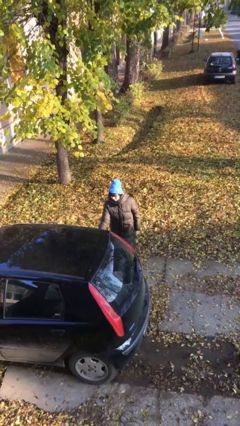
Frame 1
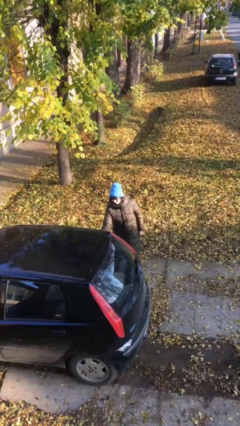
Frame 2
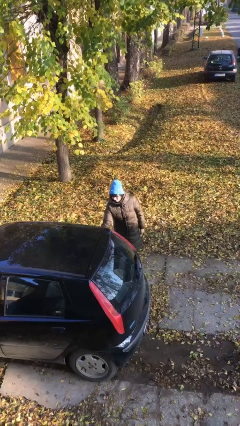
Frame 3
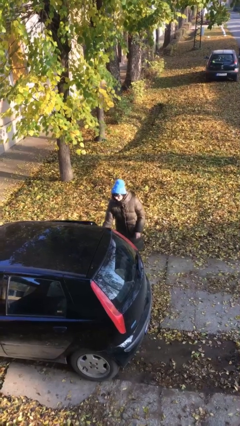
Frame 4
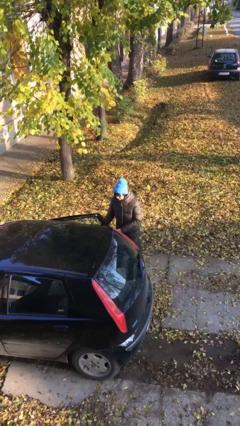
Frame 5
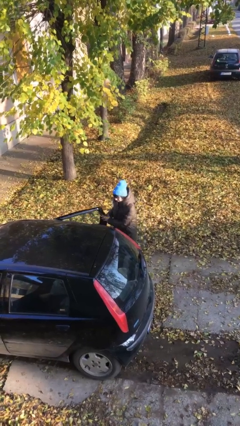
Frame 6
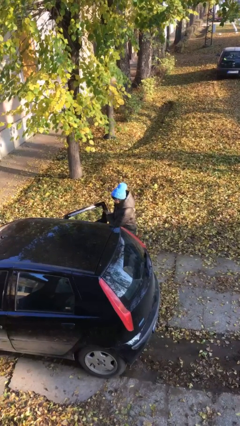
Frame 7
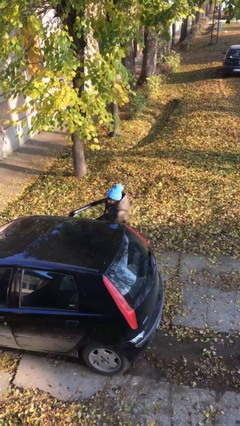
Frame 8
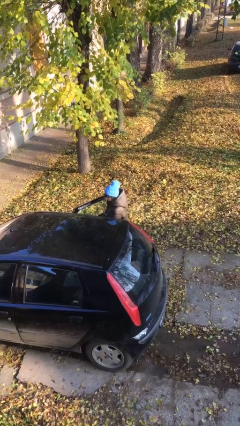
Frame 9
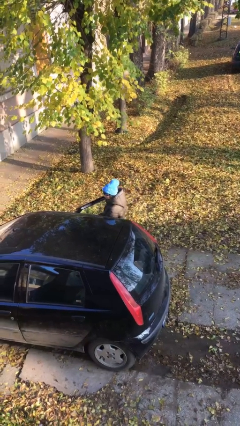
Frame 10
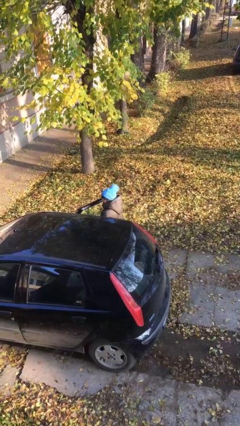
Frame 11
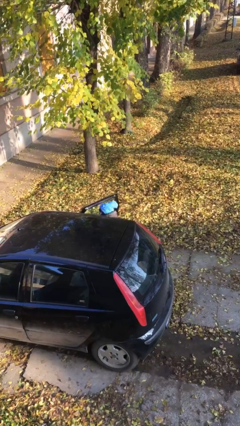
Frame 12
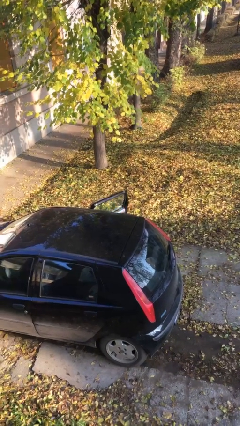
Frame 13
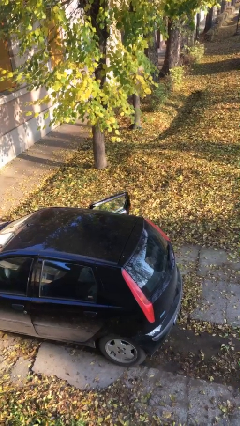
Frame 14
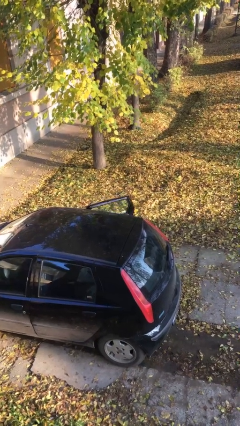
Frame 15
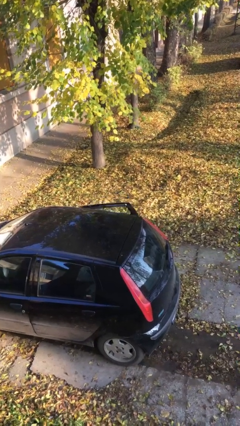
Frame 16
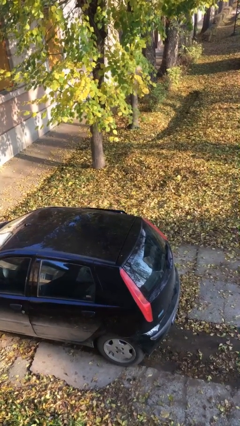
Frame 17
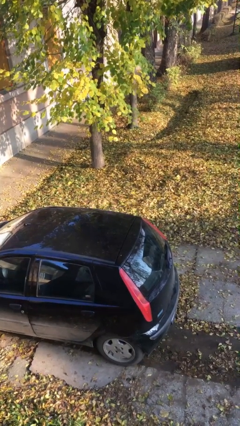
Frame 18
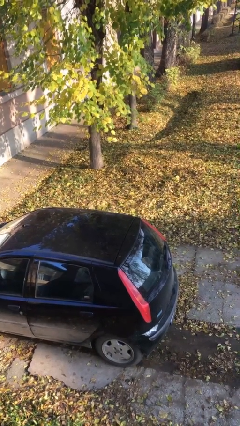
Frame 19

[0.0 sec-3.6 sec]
person enters car

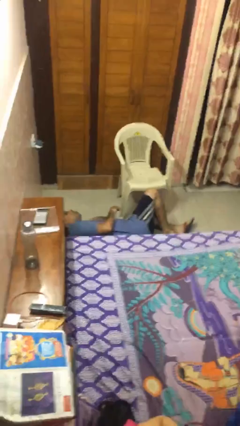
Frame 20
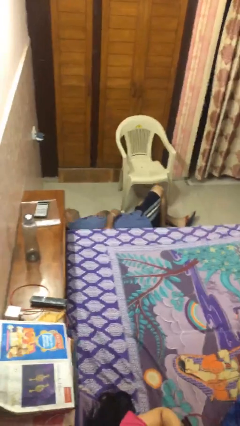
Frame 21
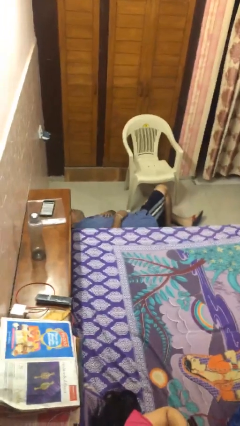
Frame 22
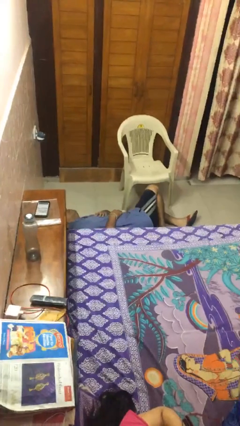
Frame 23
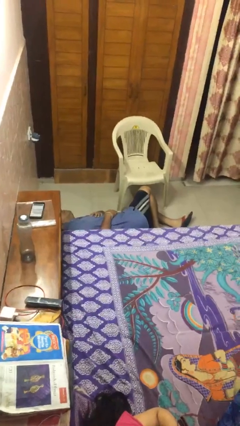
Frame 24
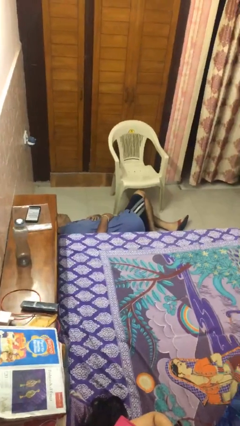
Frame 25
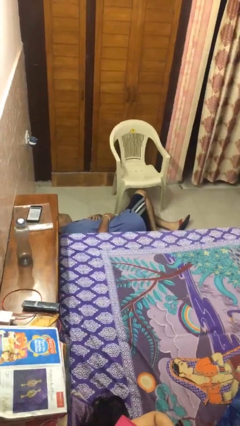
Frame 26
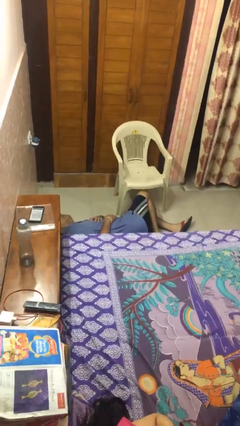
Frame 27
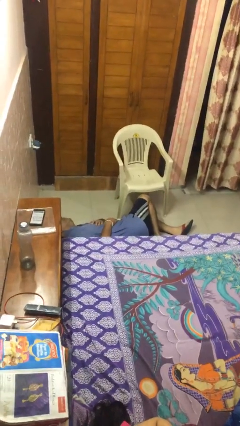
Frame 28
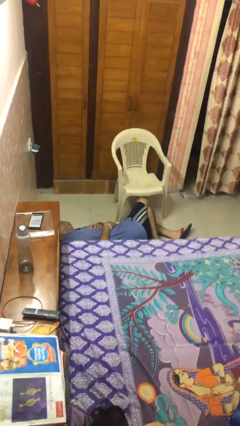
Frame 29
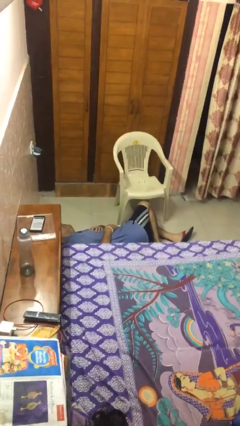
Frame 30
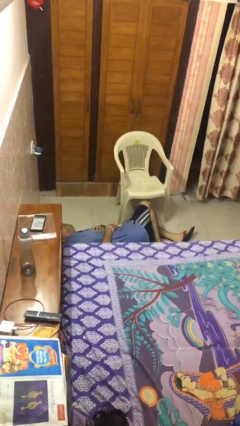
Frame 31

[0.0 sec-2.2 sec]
person lies down on floor

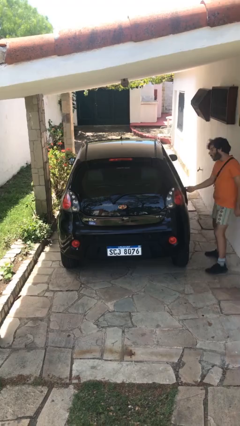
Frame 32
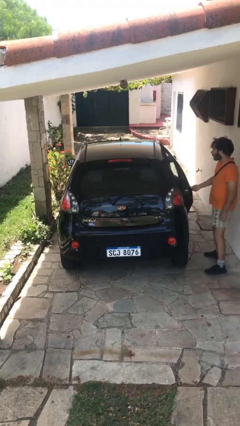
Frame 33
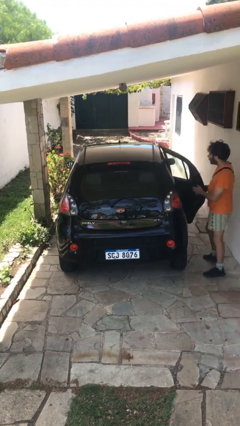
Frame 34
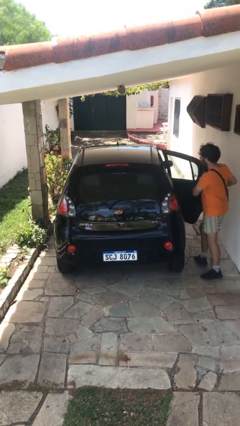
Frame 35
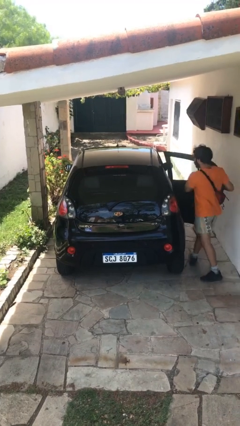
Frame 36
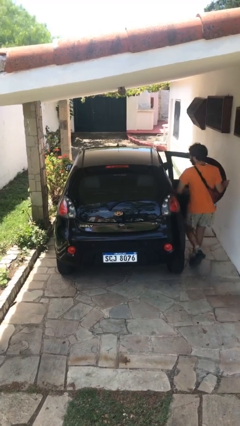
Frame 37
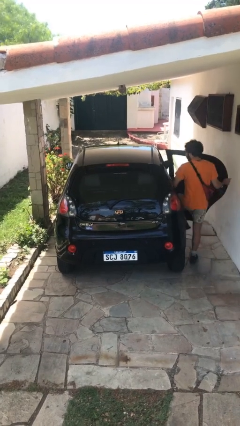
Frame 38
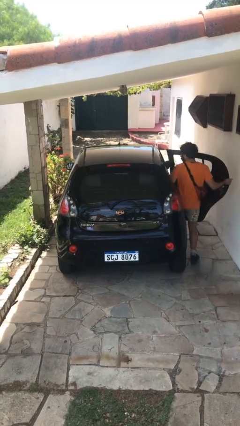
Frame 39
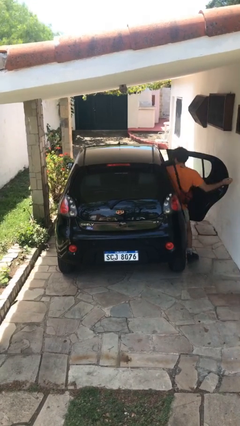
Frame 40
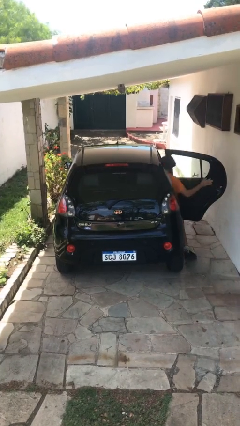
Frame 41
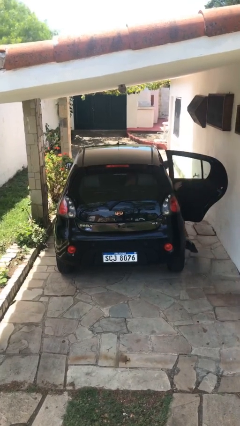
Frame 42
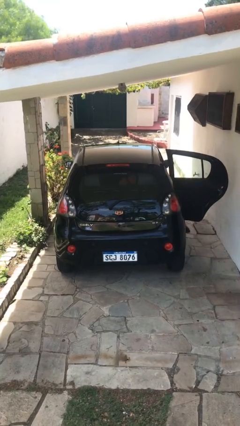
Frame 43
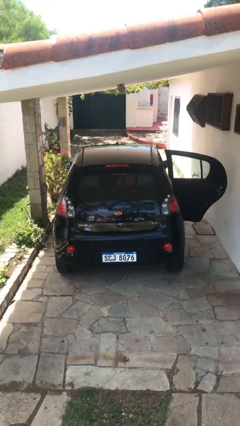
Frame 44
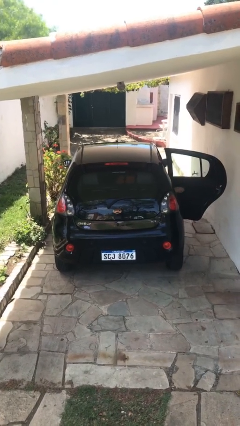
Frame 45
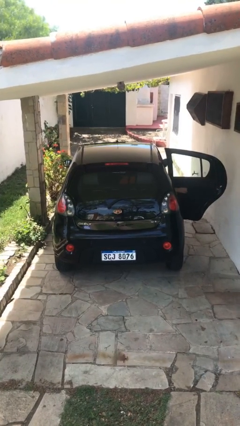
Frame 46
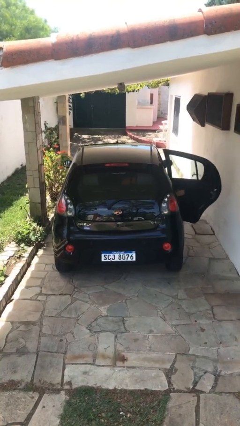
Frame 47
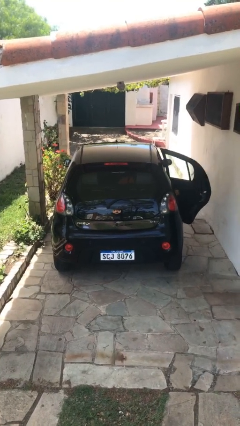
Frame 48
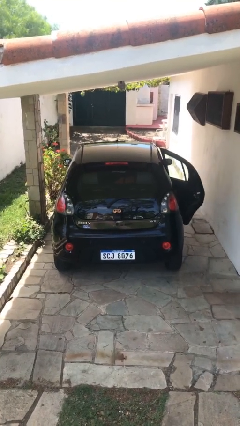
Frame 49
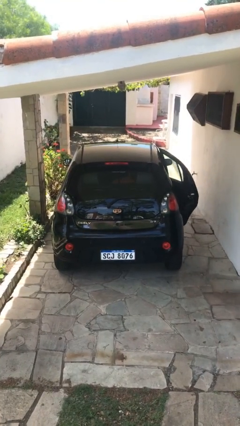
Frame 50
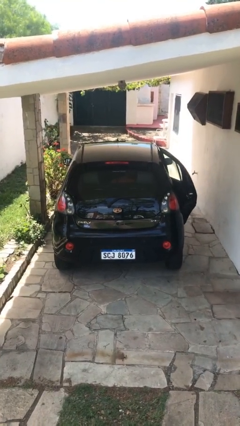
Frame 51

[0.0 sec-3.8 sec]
car picks up person

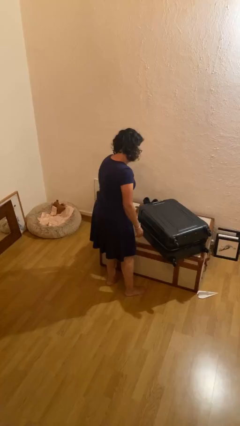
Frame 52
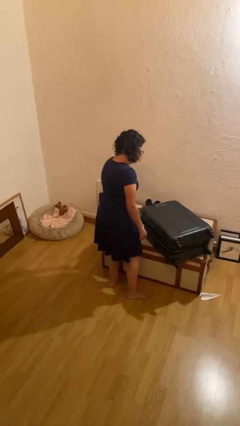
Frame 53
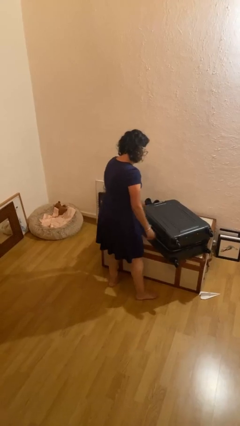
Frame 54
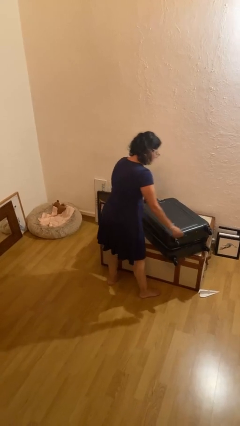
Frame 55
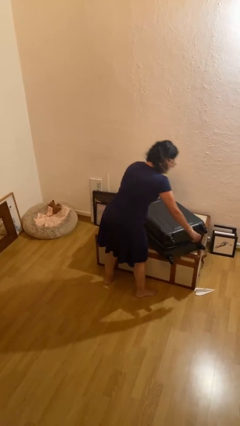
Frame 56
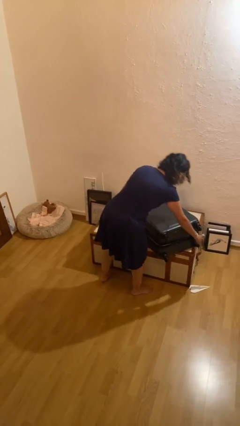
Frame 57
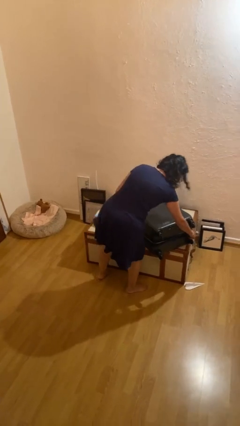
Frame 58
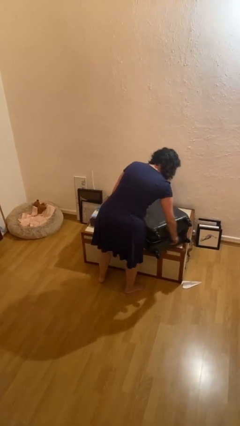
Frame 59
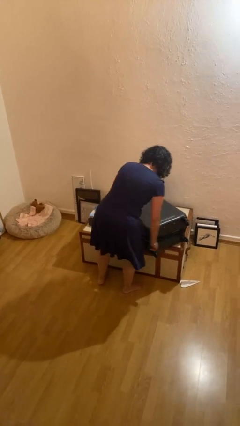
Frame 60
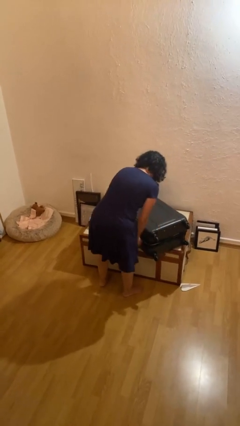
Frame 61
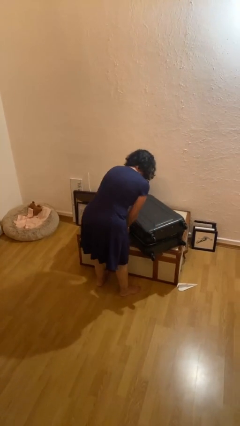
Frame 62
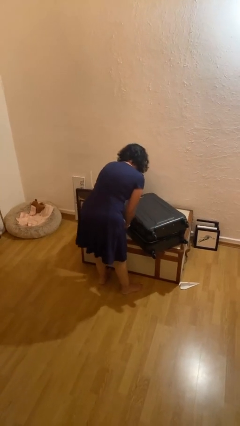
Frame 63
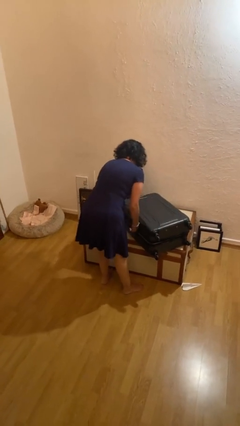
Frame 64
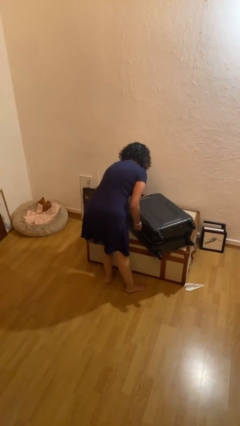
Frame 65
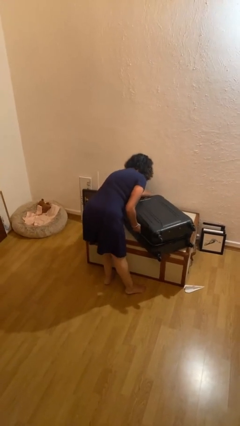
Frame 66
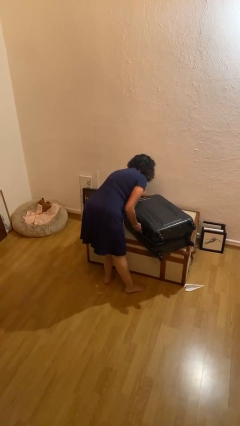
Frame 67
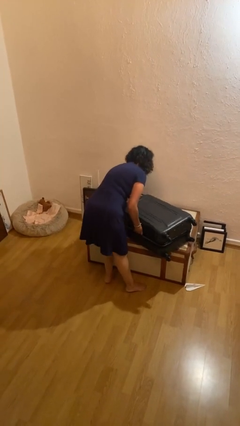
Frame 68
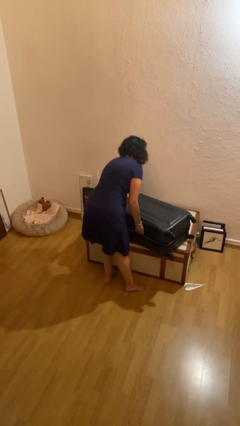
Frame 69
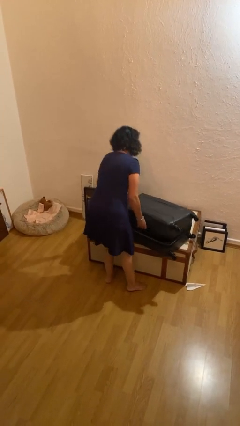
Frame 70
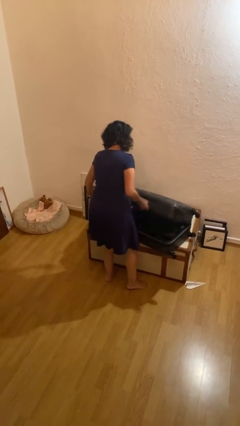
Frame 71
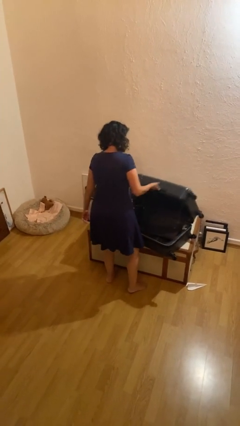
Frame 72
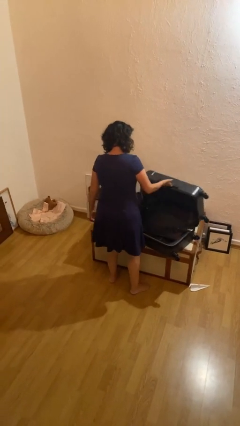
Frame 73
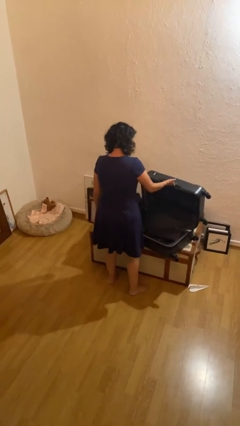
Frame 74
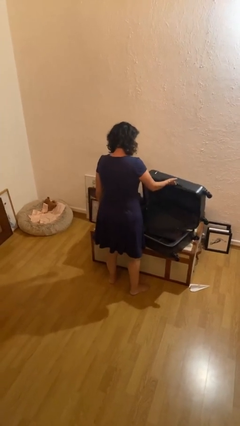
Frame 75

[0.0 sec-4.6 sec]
person opens suitcase

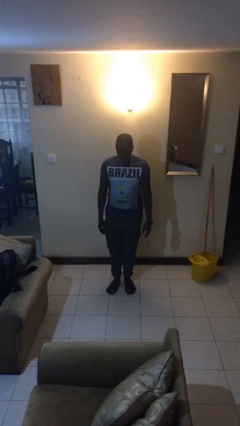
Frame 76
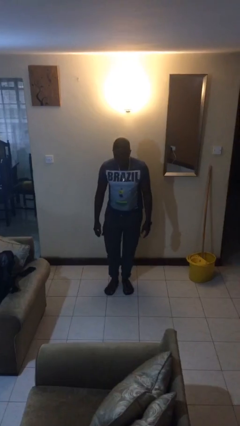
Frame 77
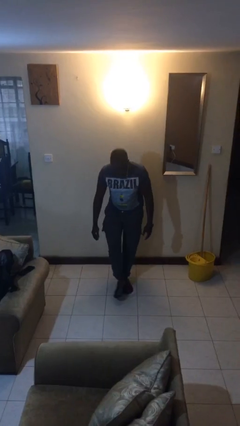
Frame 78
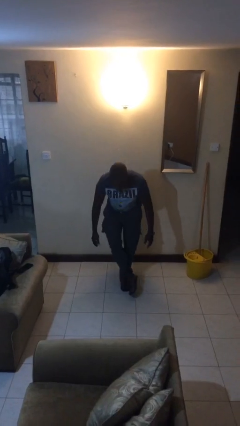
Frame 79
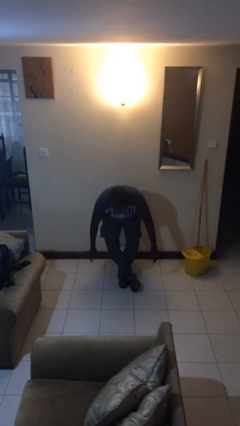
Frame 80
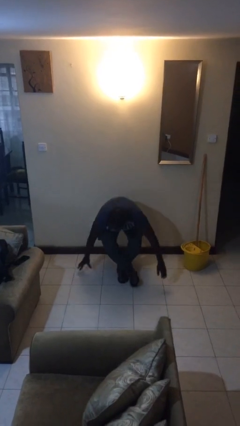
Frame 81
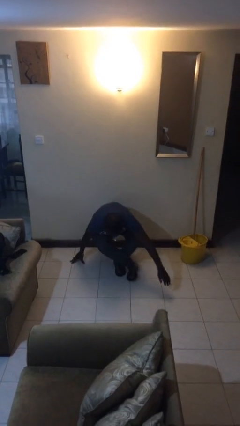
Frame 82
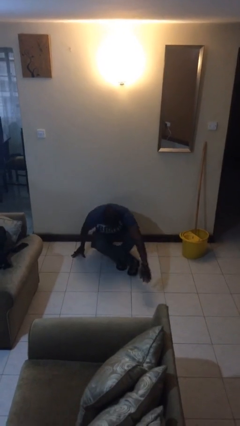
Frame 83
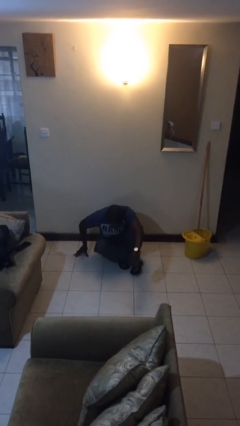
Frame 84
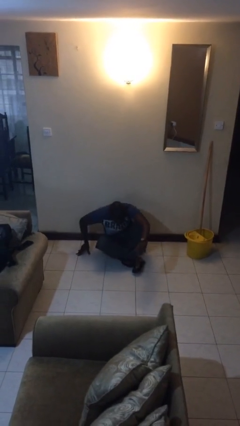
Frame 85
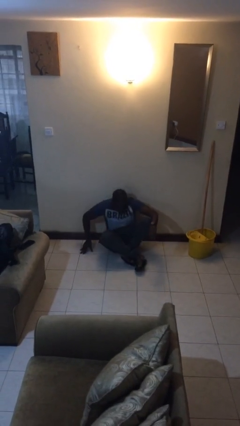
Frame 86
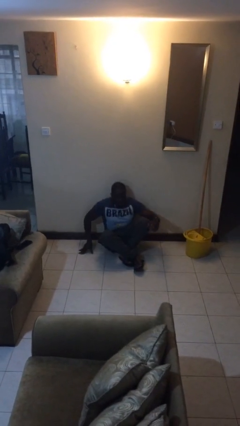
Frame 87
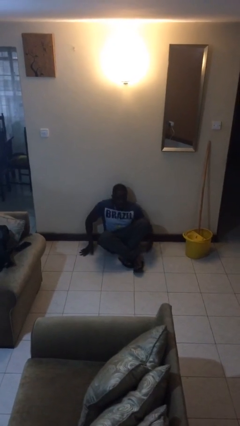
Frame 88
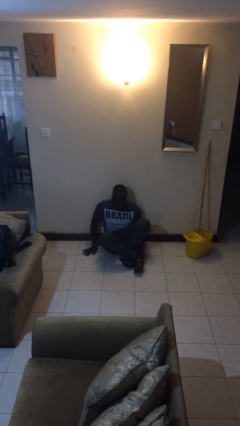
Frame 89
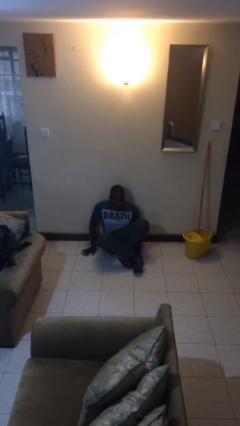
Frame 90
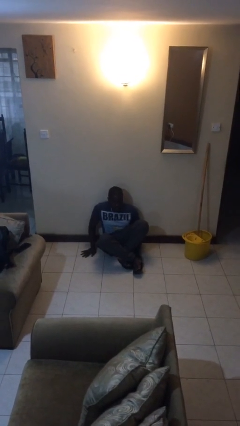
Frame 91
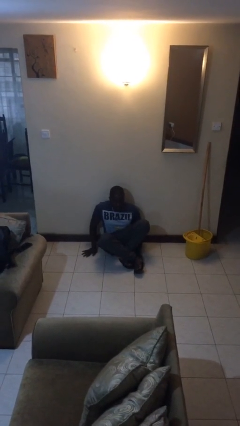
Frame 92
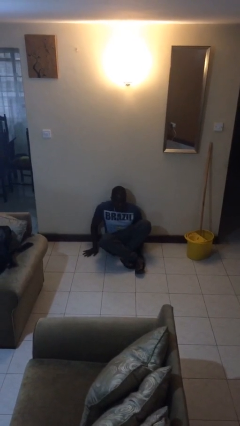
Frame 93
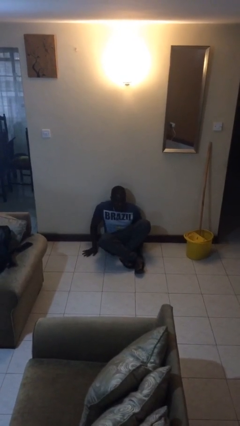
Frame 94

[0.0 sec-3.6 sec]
person sits crisscross
